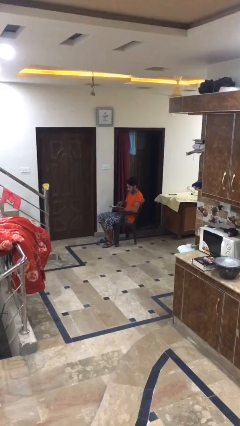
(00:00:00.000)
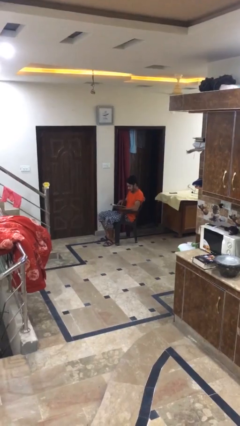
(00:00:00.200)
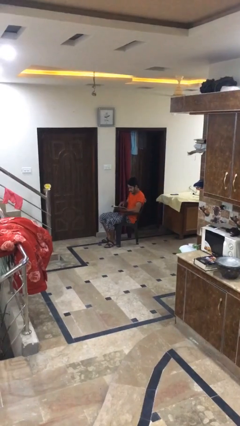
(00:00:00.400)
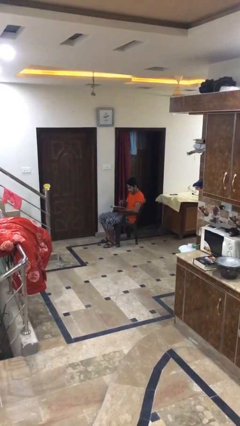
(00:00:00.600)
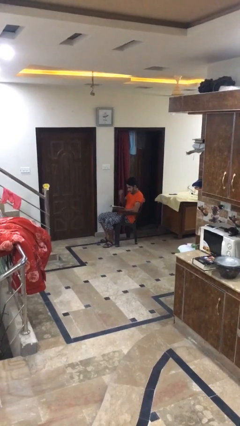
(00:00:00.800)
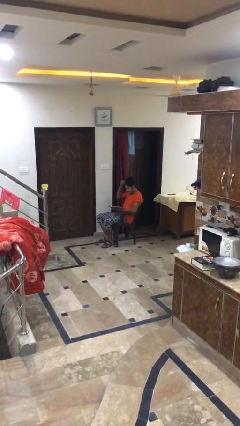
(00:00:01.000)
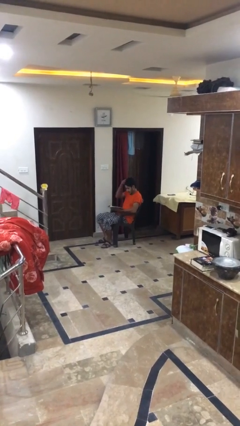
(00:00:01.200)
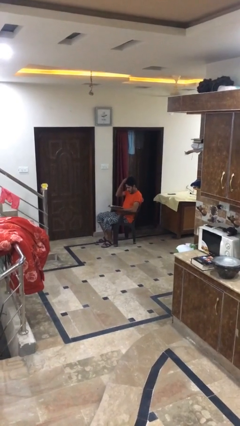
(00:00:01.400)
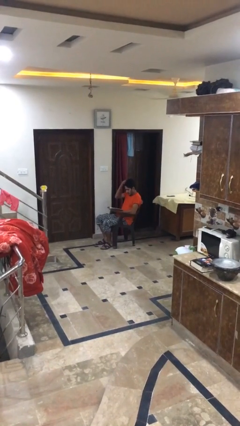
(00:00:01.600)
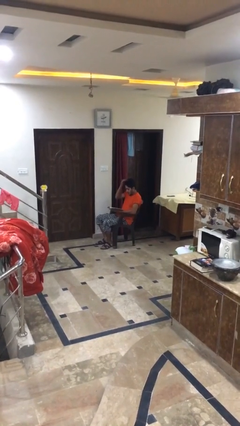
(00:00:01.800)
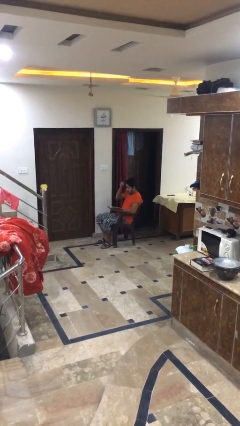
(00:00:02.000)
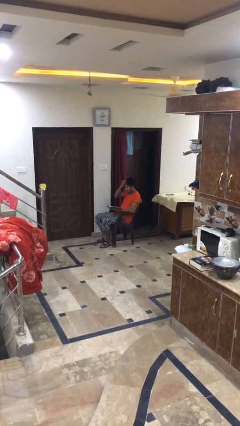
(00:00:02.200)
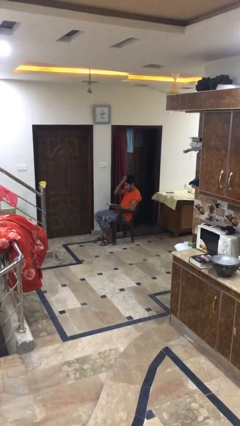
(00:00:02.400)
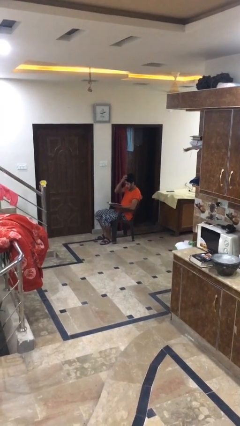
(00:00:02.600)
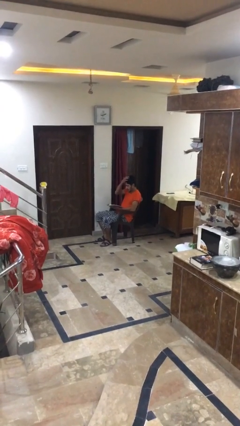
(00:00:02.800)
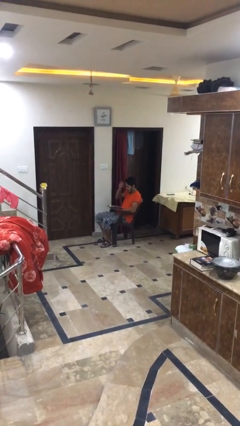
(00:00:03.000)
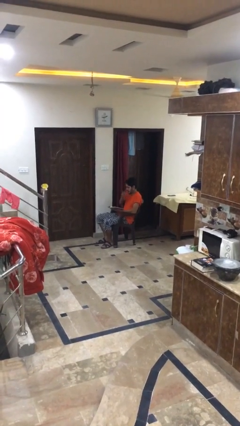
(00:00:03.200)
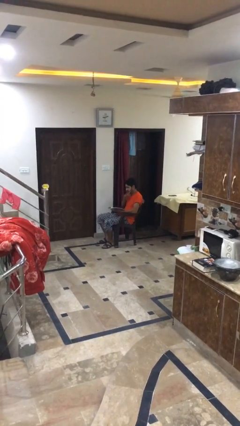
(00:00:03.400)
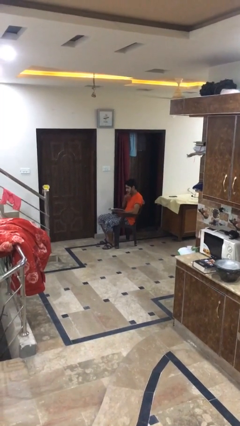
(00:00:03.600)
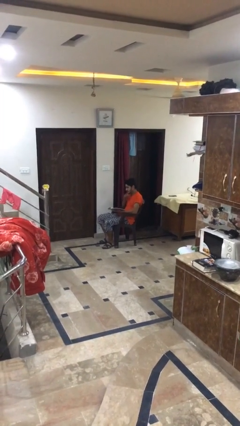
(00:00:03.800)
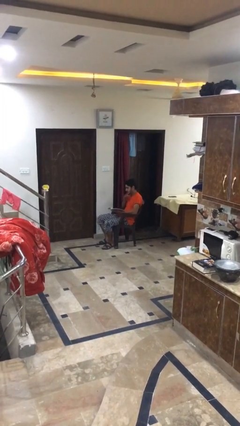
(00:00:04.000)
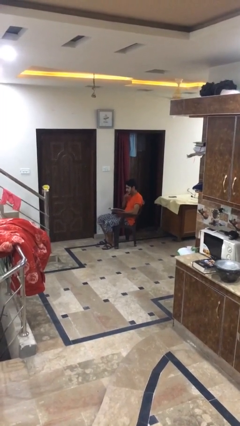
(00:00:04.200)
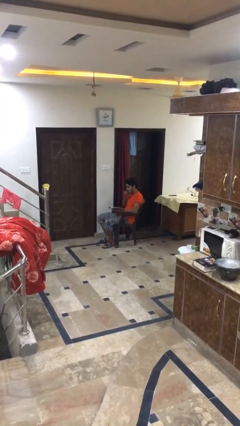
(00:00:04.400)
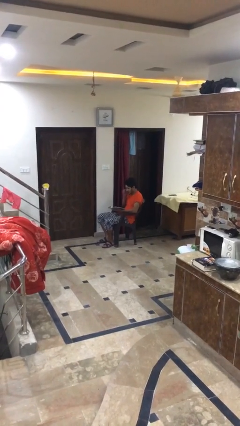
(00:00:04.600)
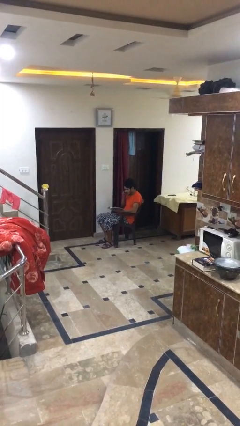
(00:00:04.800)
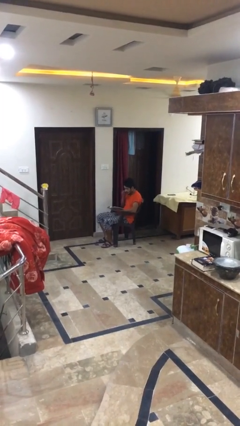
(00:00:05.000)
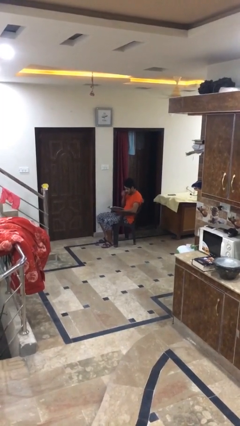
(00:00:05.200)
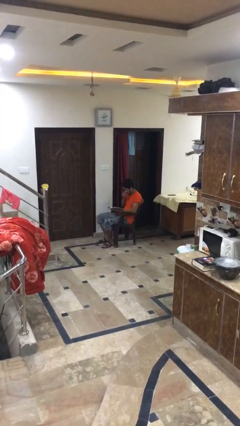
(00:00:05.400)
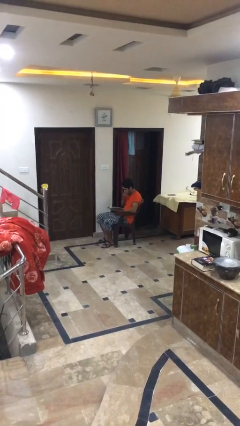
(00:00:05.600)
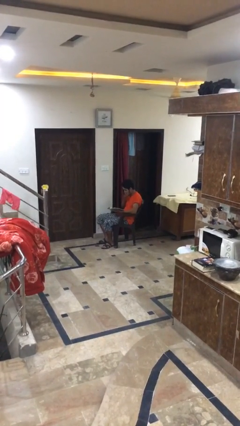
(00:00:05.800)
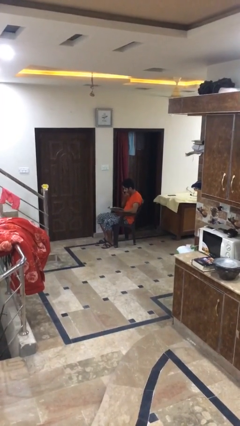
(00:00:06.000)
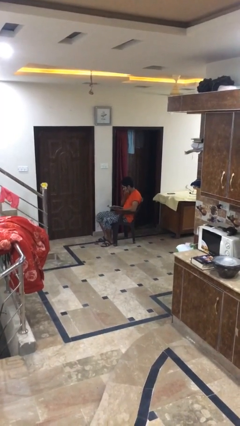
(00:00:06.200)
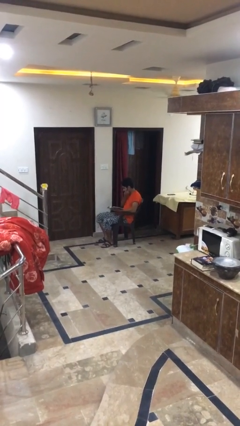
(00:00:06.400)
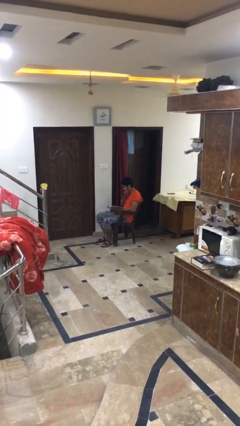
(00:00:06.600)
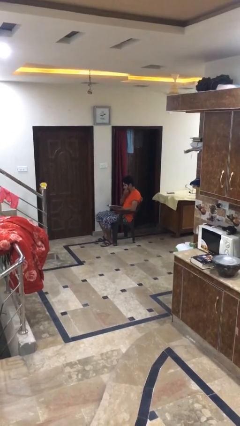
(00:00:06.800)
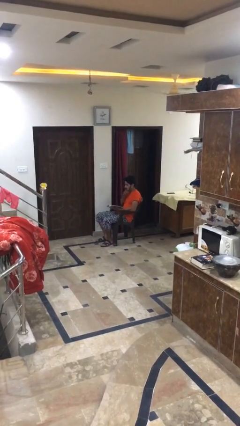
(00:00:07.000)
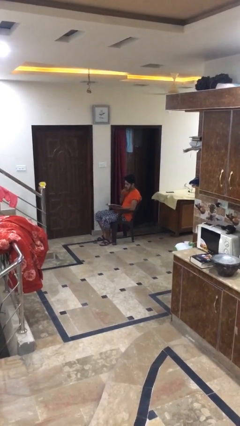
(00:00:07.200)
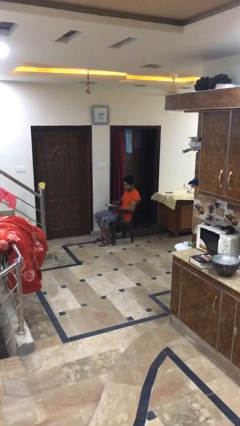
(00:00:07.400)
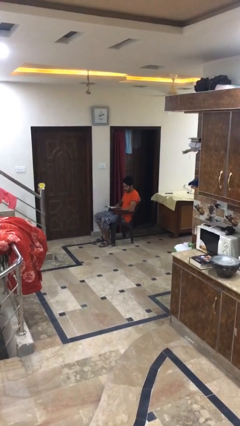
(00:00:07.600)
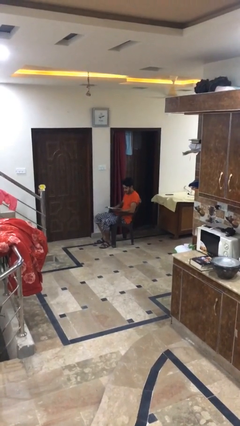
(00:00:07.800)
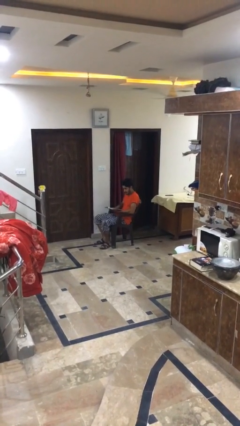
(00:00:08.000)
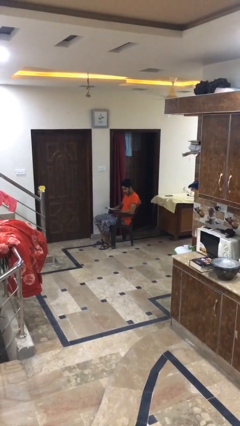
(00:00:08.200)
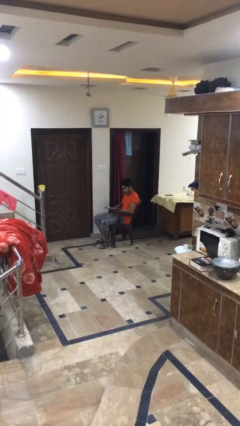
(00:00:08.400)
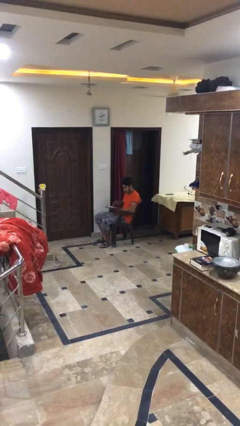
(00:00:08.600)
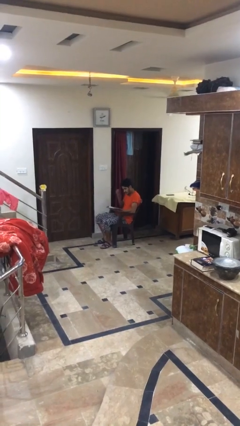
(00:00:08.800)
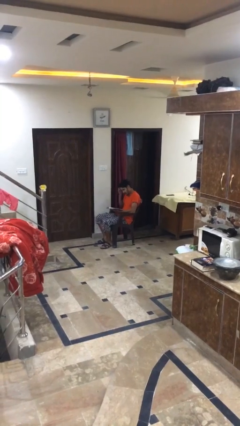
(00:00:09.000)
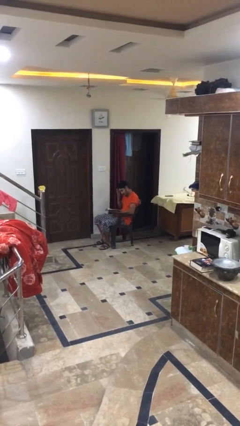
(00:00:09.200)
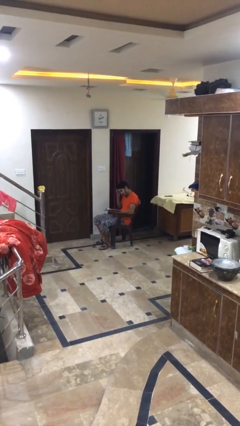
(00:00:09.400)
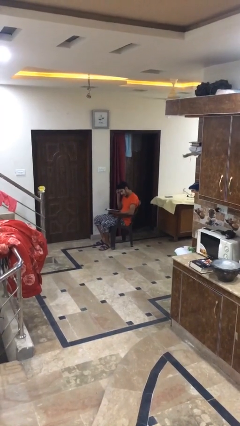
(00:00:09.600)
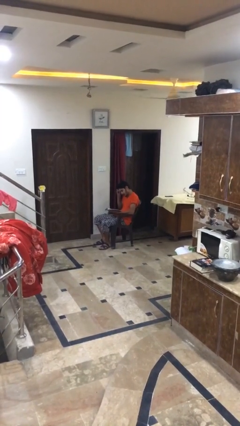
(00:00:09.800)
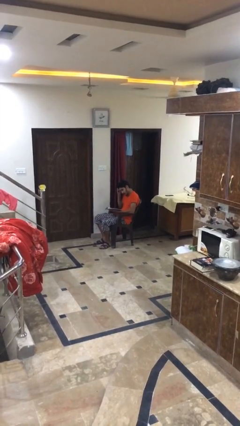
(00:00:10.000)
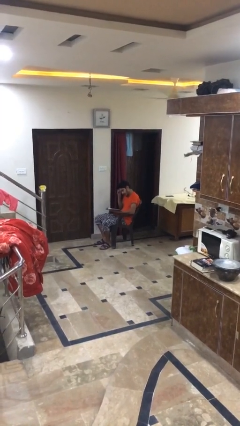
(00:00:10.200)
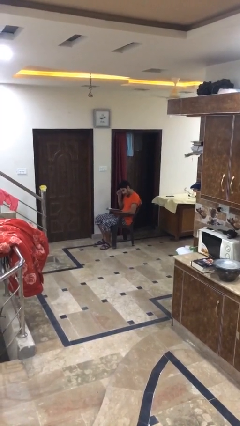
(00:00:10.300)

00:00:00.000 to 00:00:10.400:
person reads document

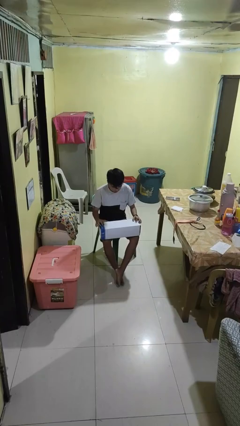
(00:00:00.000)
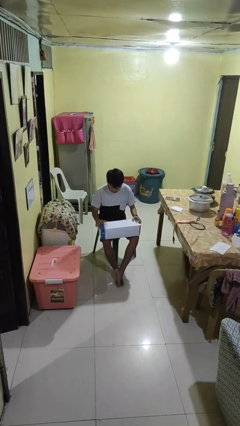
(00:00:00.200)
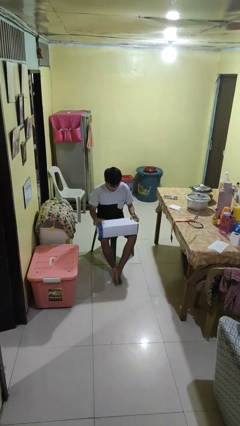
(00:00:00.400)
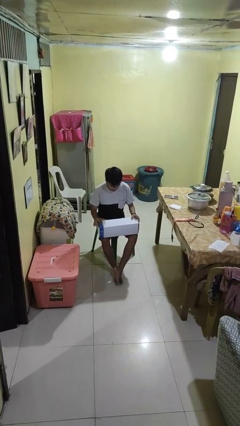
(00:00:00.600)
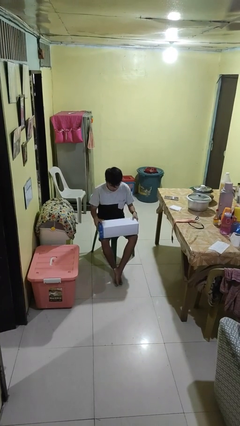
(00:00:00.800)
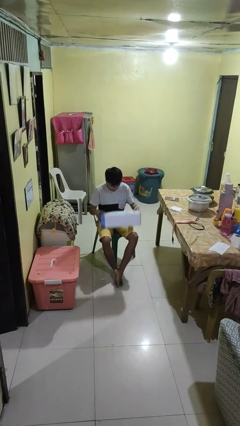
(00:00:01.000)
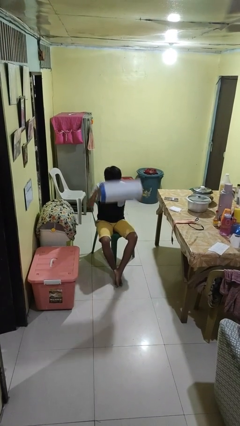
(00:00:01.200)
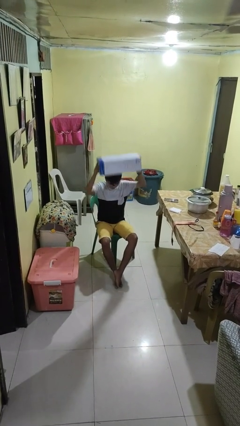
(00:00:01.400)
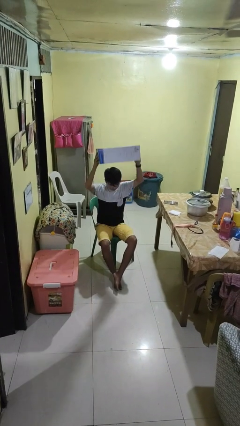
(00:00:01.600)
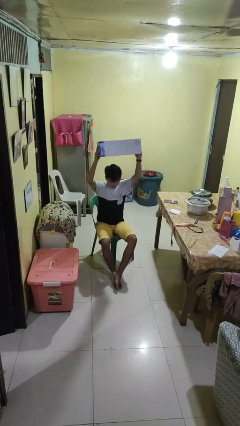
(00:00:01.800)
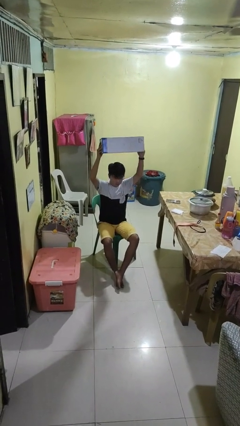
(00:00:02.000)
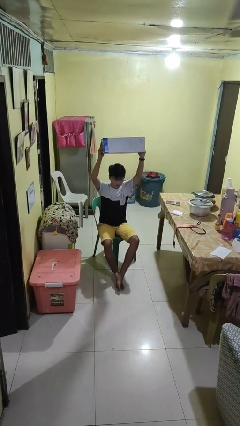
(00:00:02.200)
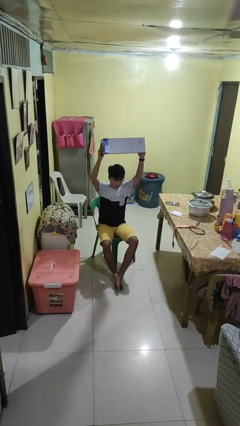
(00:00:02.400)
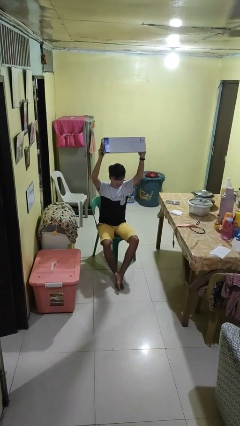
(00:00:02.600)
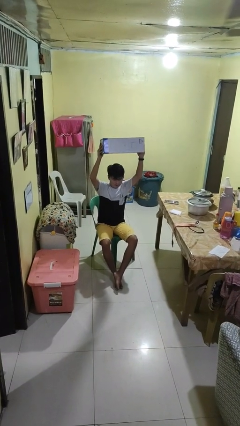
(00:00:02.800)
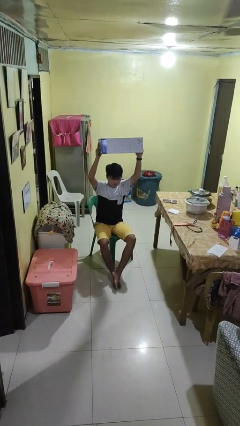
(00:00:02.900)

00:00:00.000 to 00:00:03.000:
person holds object above head

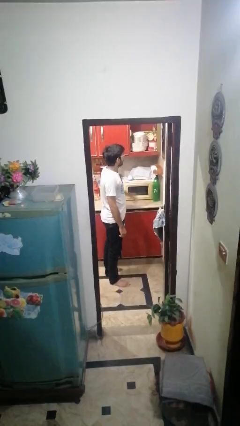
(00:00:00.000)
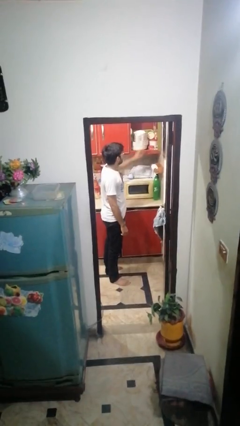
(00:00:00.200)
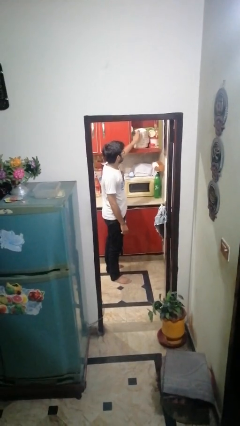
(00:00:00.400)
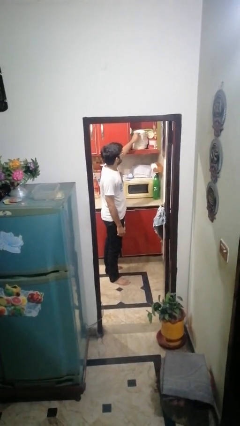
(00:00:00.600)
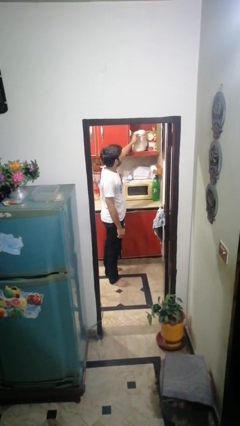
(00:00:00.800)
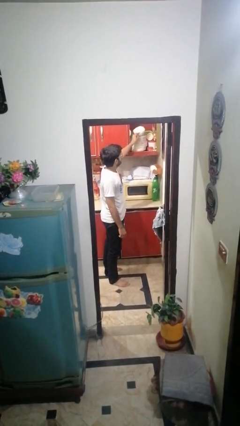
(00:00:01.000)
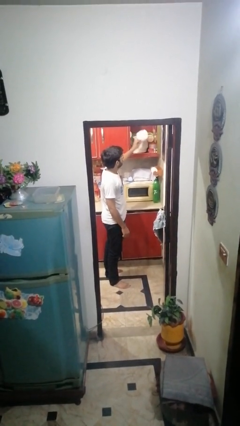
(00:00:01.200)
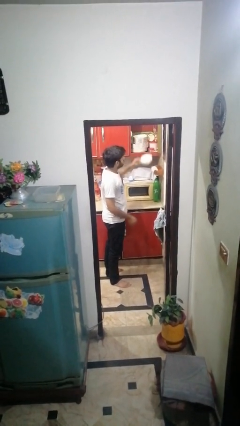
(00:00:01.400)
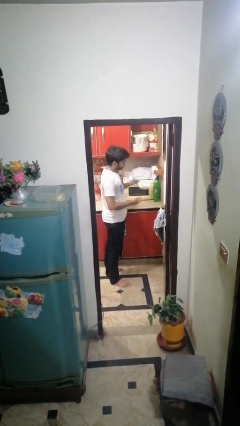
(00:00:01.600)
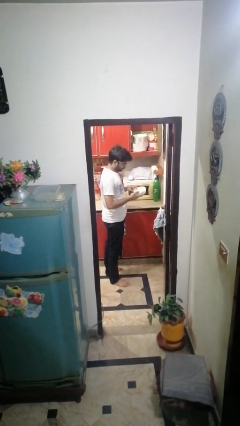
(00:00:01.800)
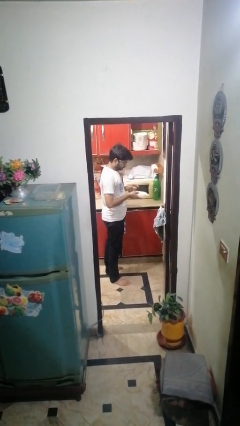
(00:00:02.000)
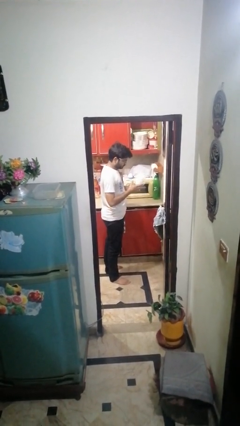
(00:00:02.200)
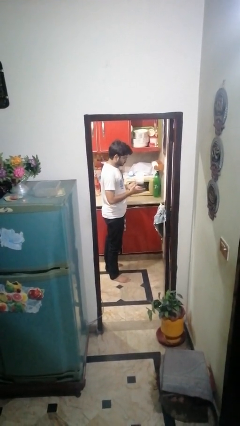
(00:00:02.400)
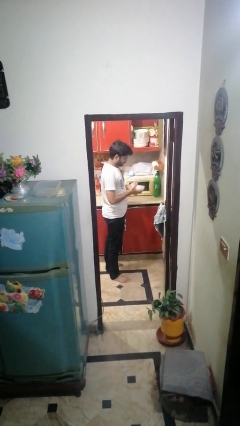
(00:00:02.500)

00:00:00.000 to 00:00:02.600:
person picks up object from cabinet

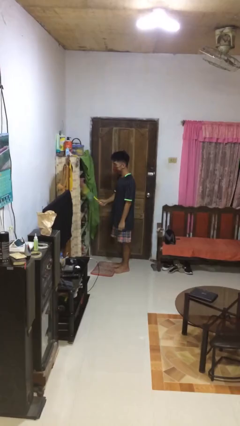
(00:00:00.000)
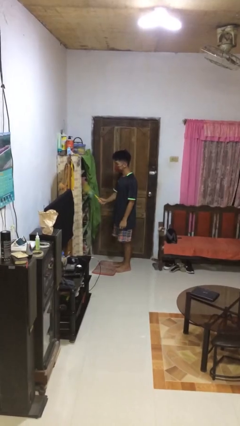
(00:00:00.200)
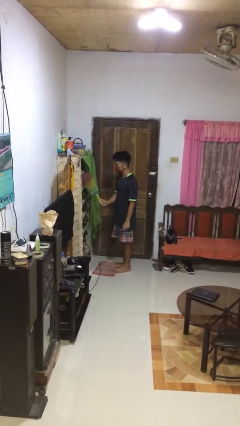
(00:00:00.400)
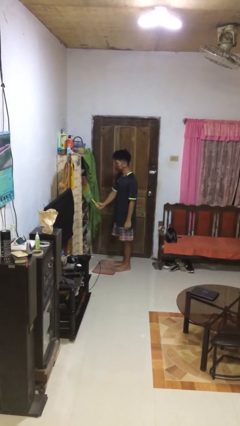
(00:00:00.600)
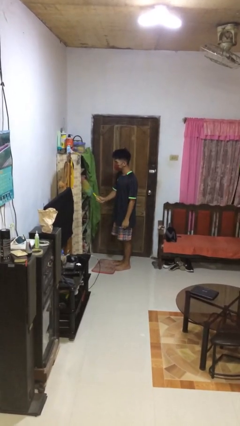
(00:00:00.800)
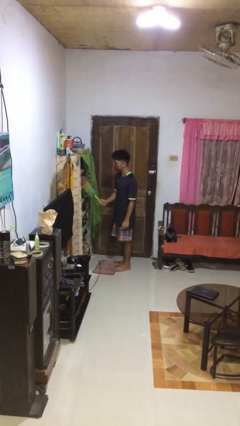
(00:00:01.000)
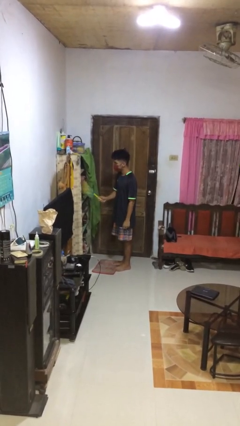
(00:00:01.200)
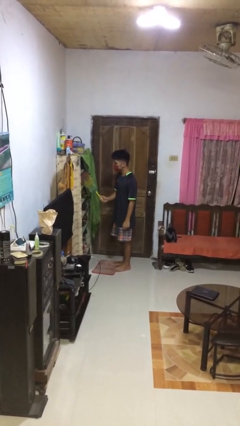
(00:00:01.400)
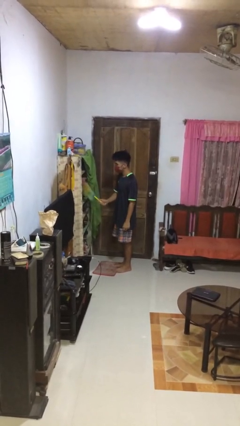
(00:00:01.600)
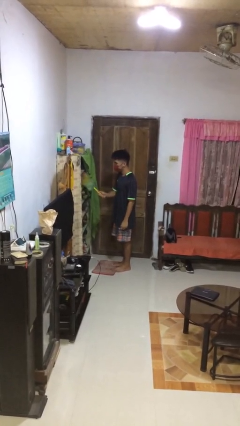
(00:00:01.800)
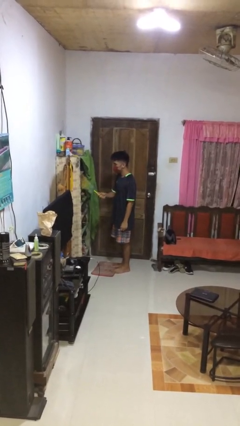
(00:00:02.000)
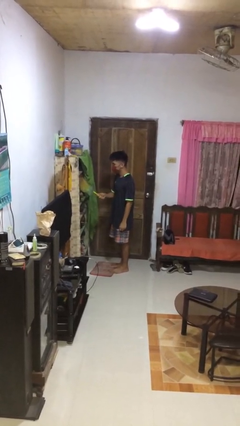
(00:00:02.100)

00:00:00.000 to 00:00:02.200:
person dusts furniture
